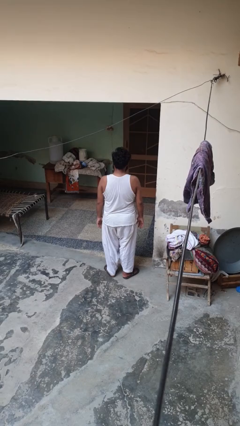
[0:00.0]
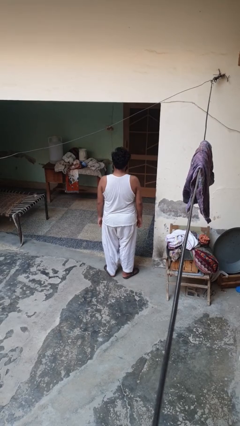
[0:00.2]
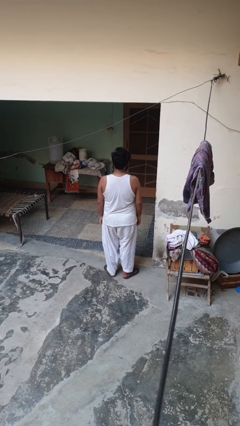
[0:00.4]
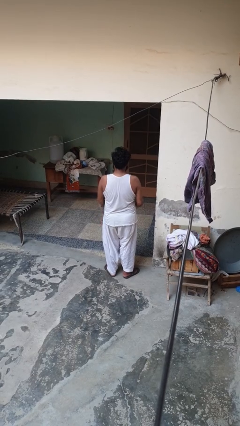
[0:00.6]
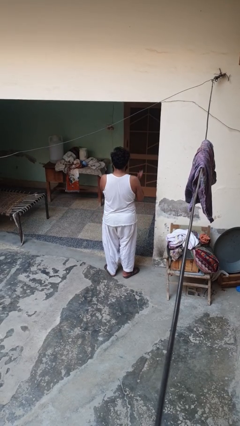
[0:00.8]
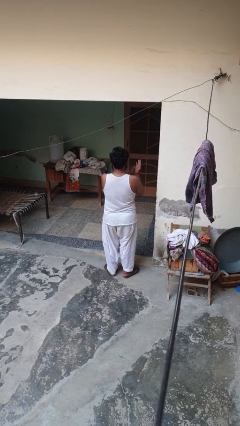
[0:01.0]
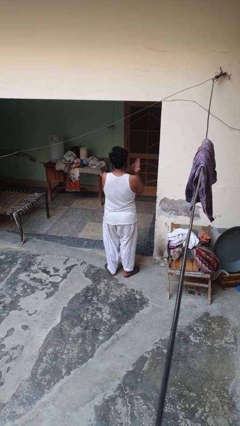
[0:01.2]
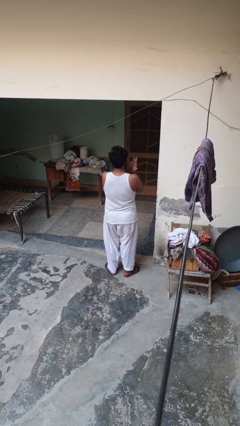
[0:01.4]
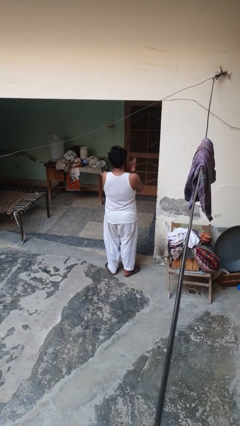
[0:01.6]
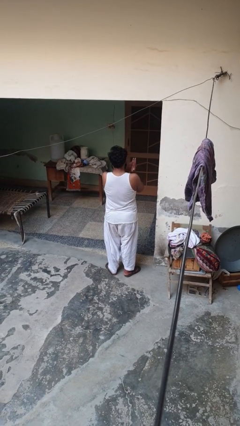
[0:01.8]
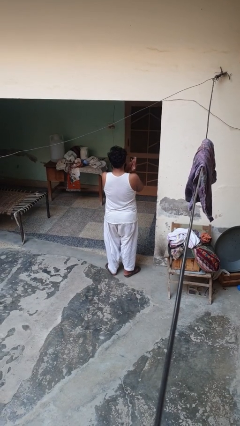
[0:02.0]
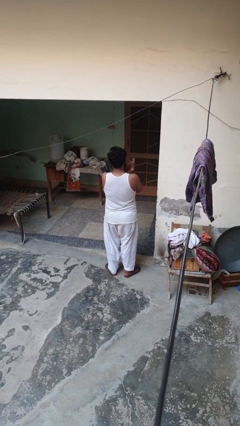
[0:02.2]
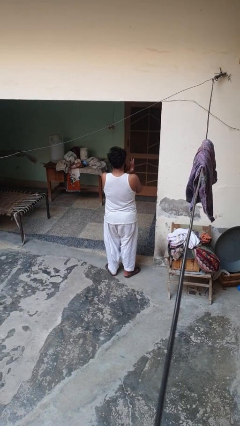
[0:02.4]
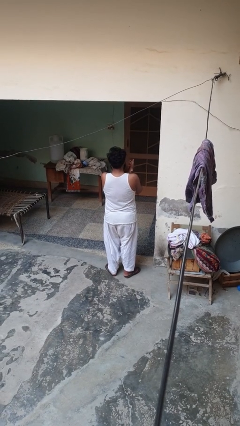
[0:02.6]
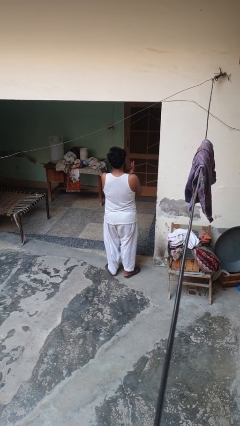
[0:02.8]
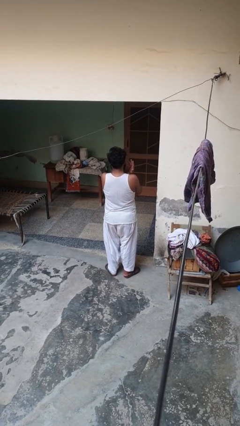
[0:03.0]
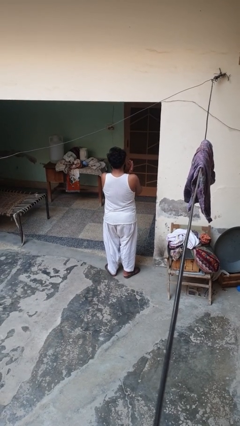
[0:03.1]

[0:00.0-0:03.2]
person snaps fingers

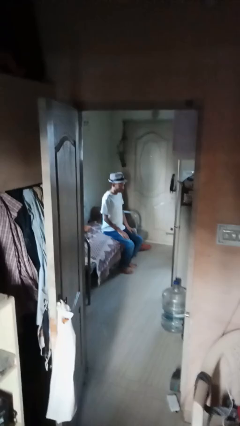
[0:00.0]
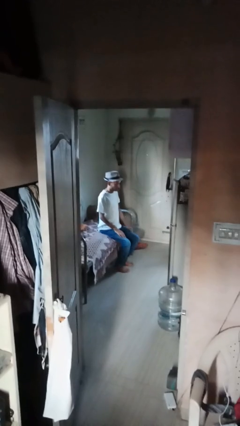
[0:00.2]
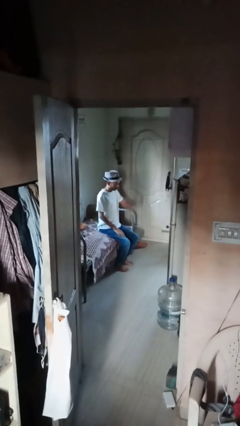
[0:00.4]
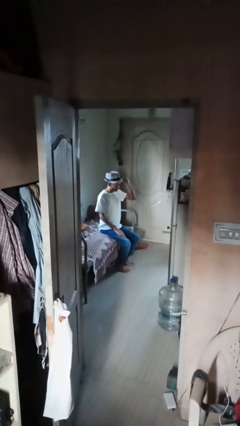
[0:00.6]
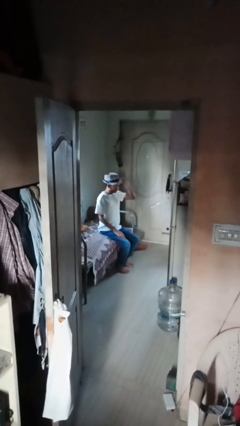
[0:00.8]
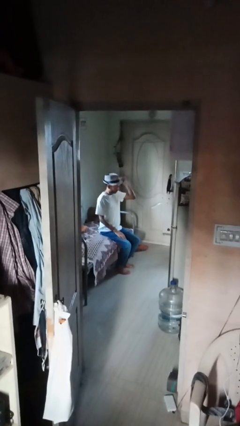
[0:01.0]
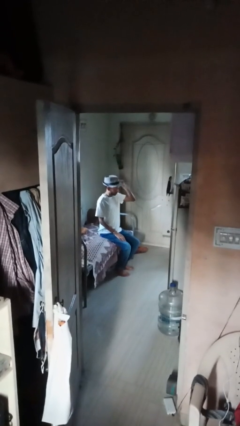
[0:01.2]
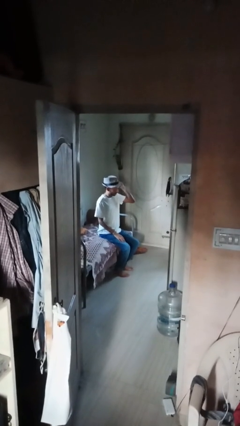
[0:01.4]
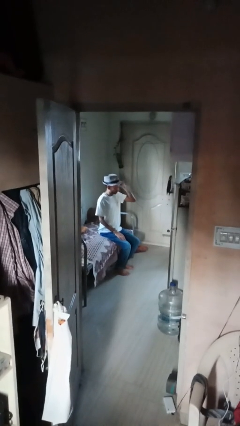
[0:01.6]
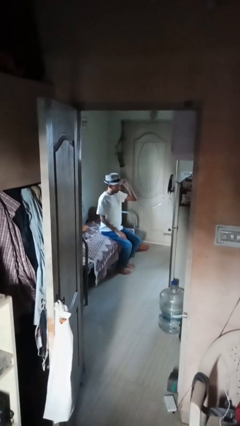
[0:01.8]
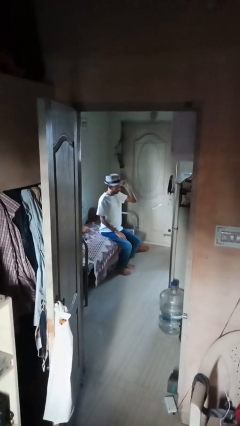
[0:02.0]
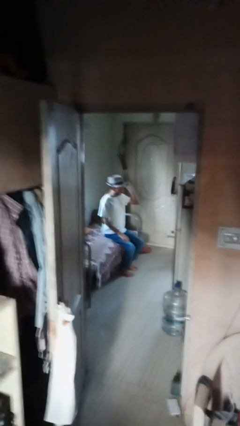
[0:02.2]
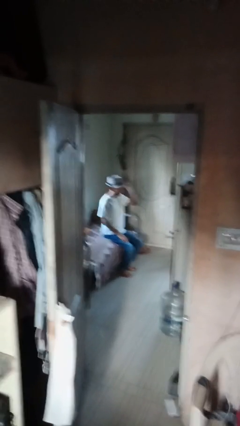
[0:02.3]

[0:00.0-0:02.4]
person gestures behind me

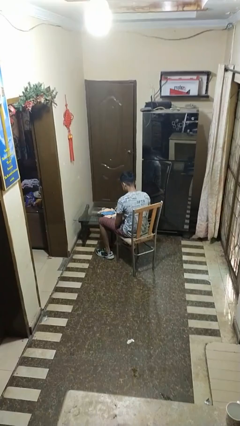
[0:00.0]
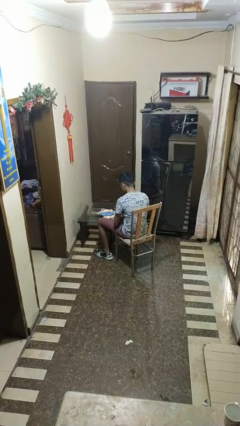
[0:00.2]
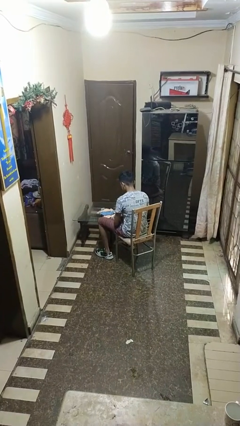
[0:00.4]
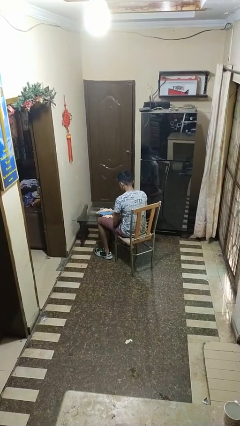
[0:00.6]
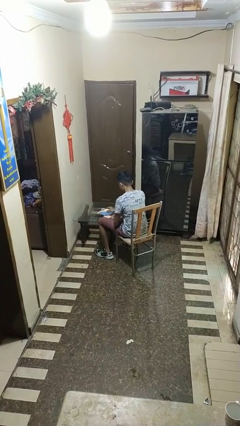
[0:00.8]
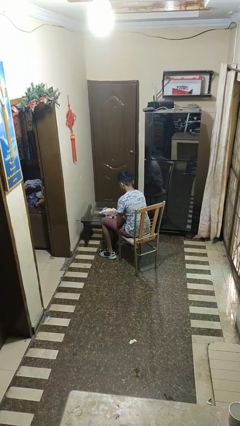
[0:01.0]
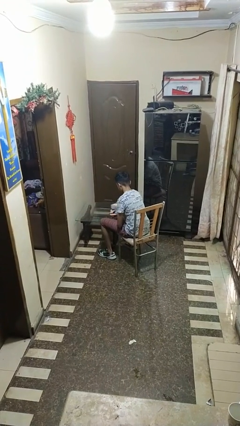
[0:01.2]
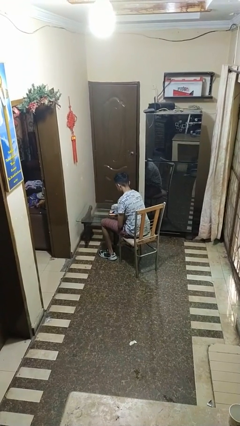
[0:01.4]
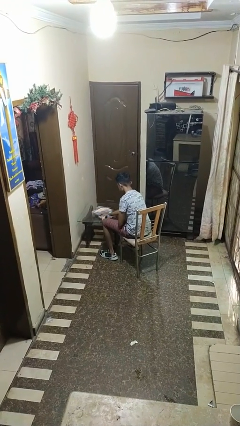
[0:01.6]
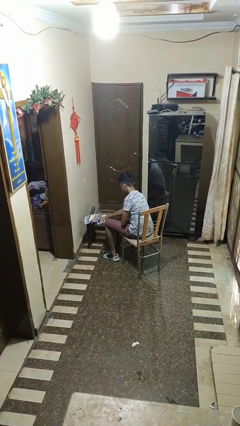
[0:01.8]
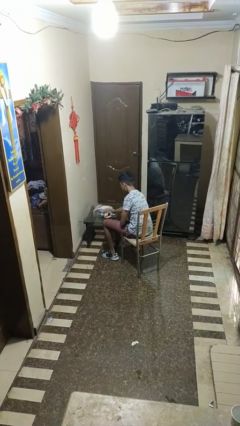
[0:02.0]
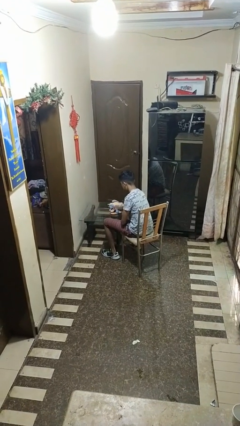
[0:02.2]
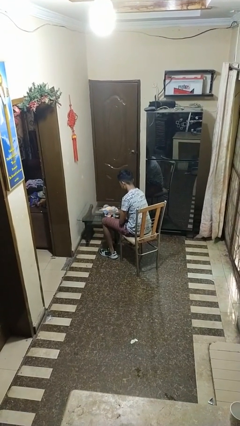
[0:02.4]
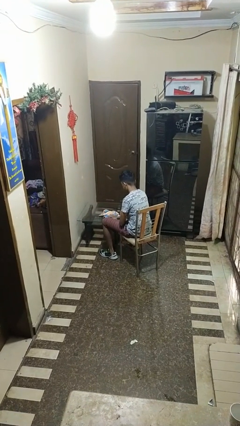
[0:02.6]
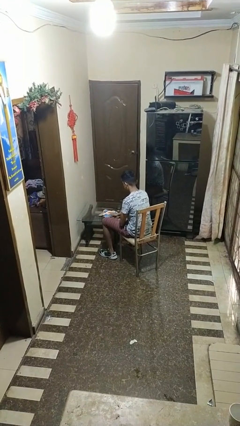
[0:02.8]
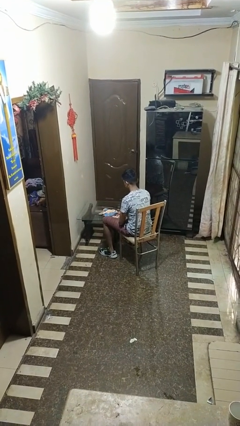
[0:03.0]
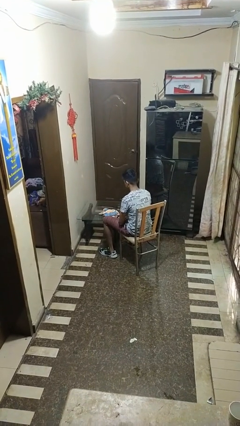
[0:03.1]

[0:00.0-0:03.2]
person cleans table with rag

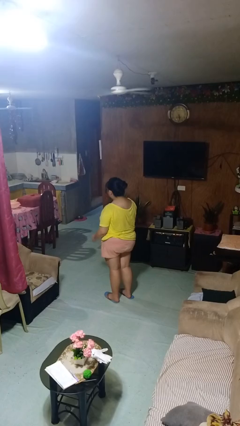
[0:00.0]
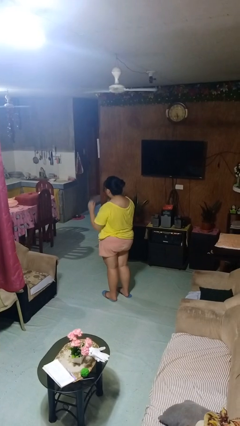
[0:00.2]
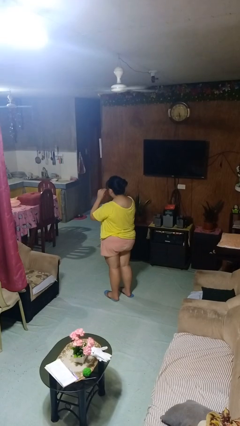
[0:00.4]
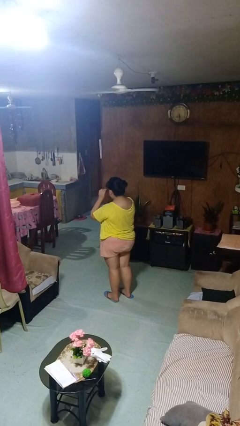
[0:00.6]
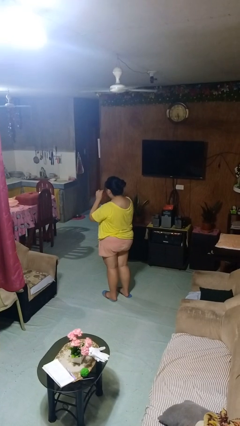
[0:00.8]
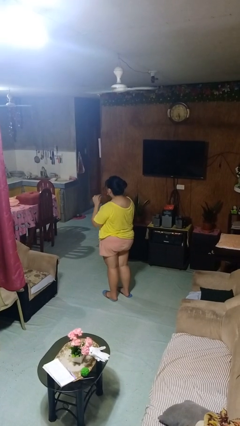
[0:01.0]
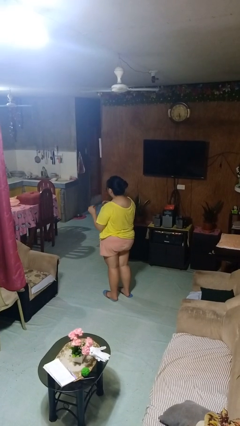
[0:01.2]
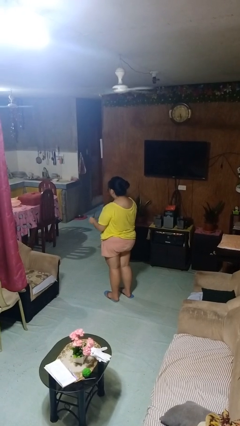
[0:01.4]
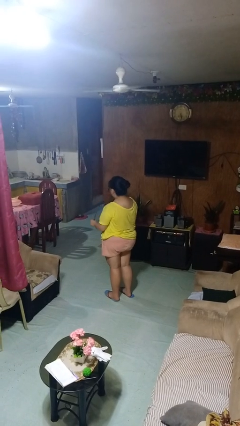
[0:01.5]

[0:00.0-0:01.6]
person takes off glasses

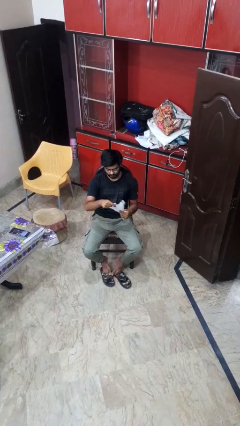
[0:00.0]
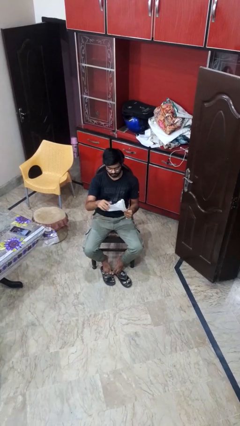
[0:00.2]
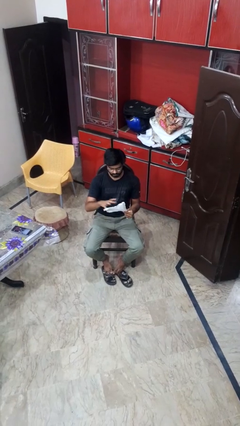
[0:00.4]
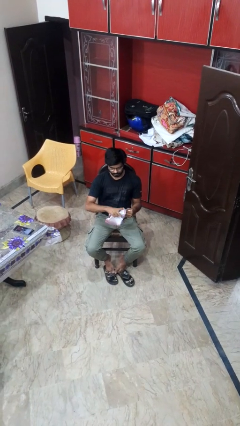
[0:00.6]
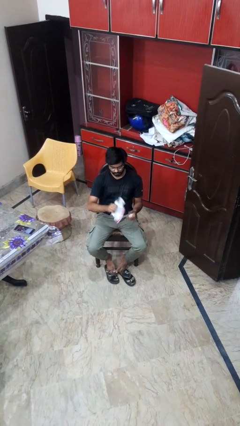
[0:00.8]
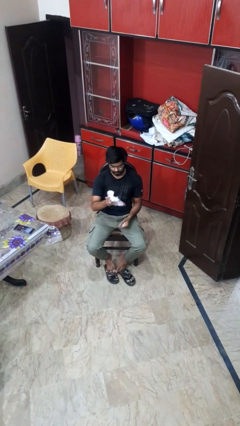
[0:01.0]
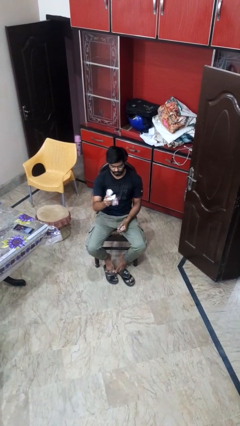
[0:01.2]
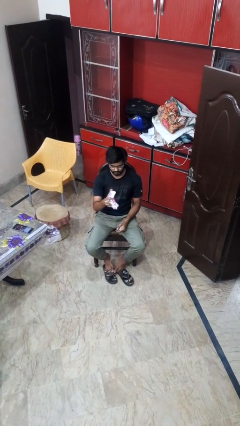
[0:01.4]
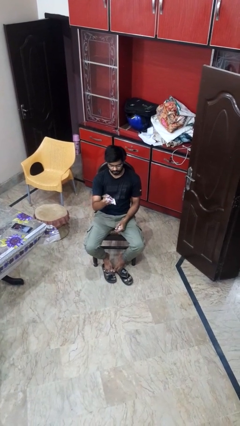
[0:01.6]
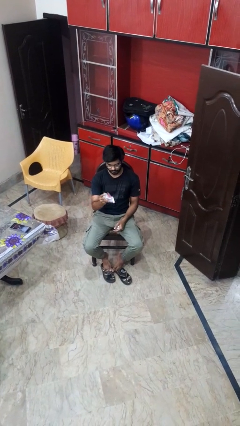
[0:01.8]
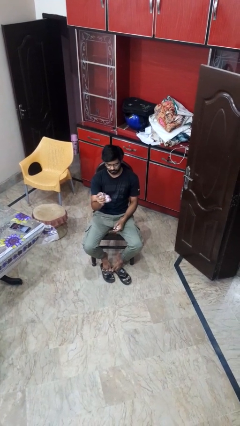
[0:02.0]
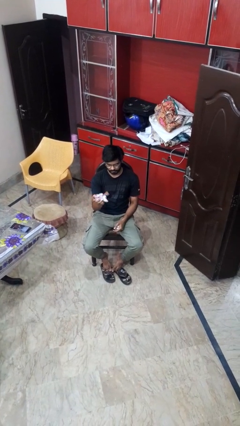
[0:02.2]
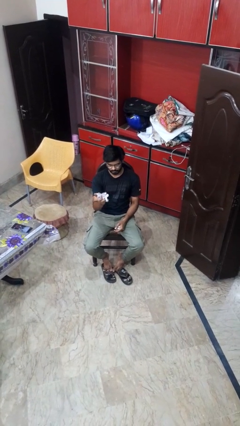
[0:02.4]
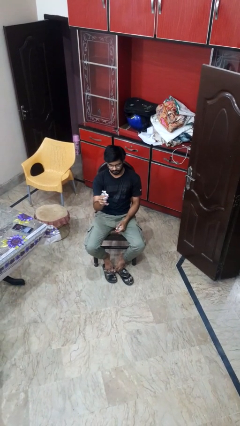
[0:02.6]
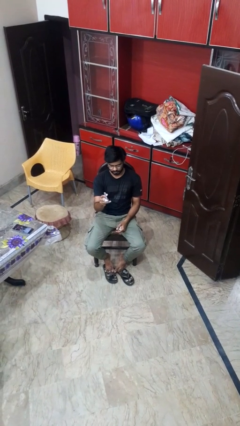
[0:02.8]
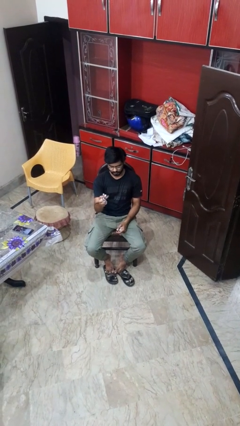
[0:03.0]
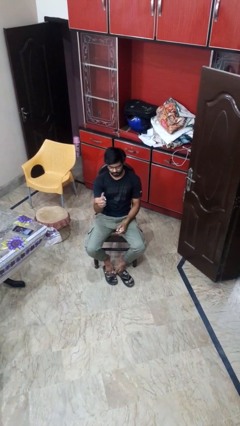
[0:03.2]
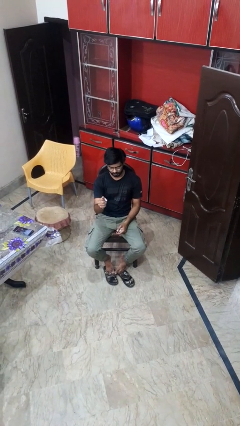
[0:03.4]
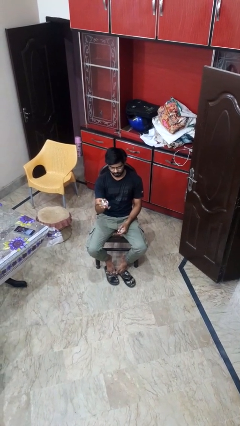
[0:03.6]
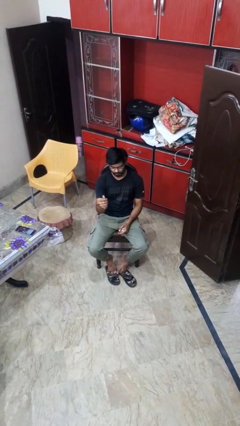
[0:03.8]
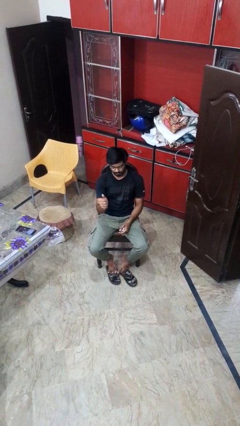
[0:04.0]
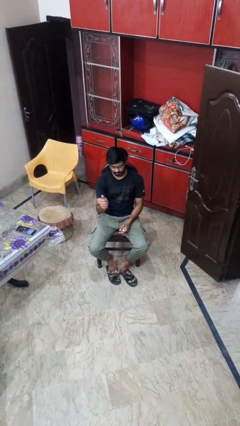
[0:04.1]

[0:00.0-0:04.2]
person crumples paper

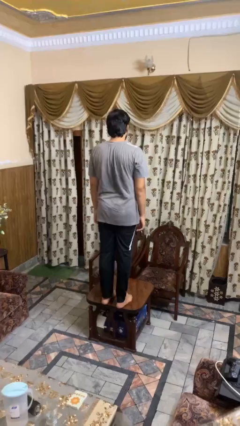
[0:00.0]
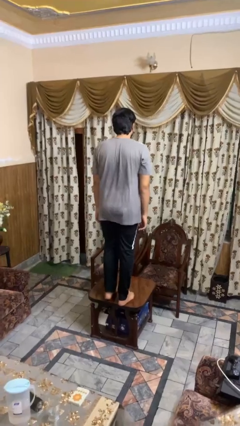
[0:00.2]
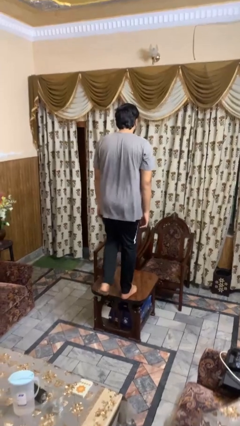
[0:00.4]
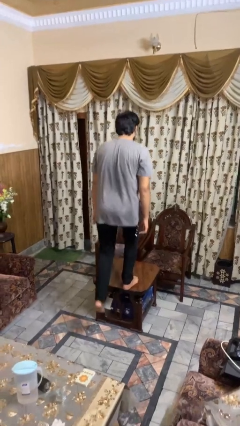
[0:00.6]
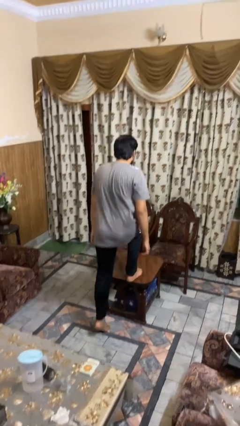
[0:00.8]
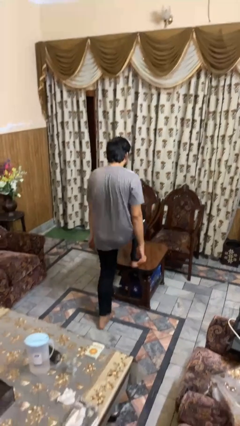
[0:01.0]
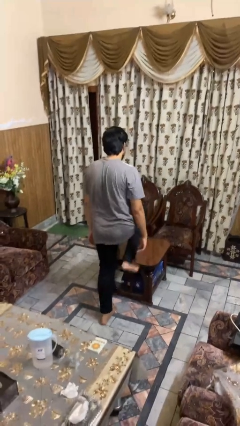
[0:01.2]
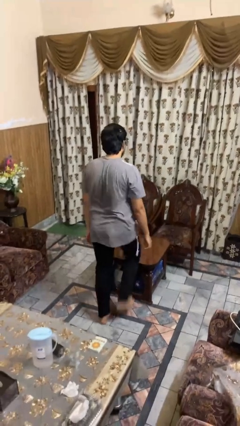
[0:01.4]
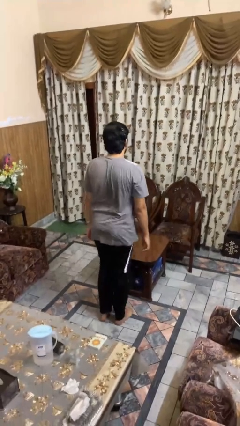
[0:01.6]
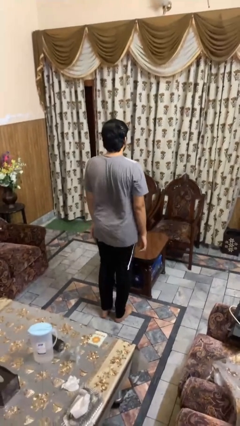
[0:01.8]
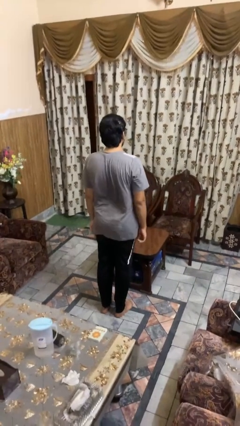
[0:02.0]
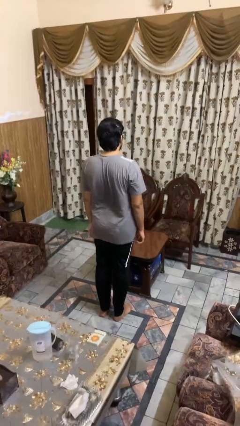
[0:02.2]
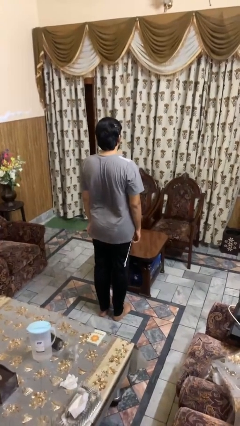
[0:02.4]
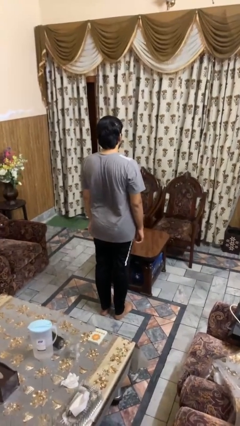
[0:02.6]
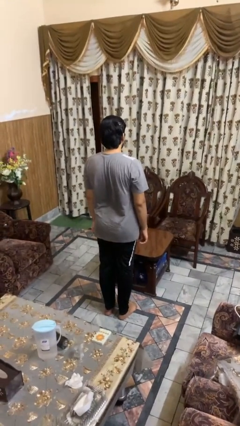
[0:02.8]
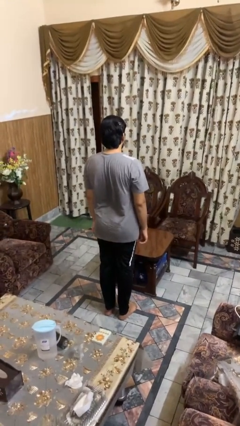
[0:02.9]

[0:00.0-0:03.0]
person climbs off table
